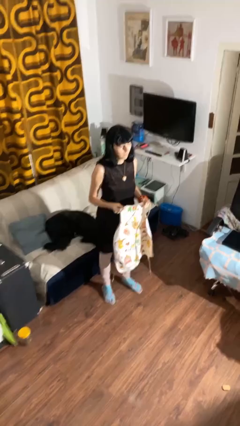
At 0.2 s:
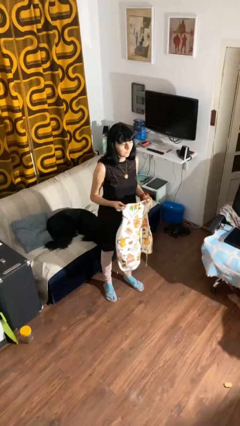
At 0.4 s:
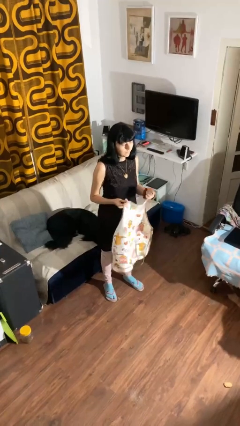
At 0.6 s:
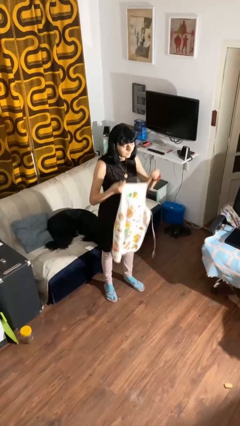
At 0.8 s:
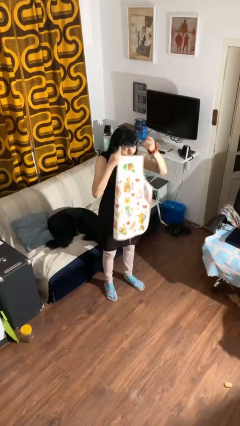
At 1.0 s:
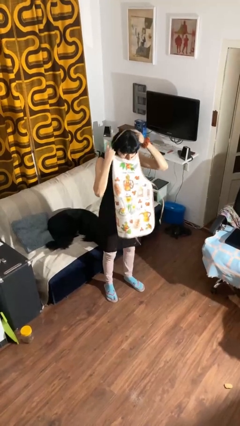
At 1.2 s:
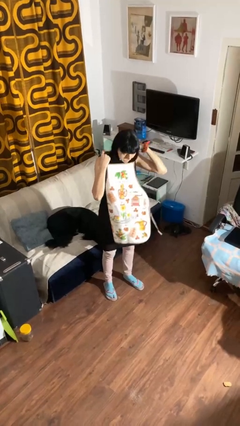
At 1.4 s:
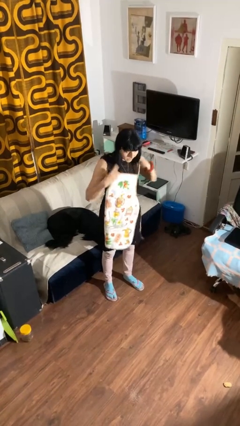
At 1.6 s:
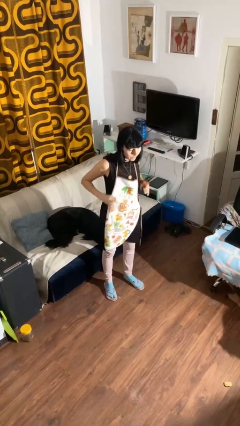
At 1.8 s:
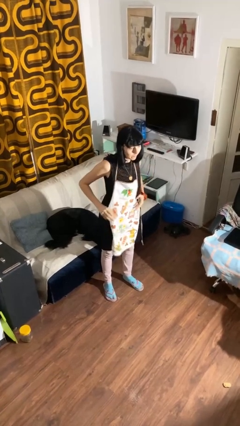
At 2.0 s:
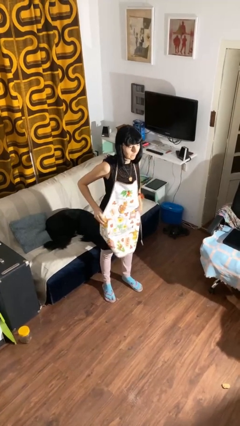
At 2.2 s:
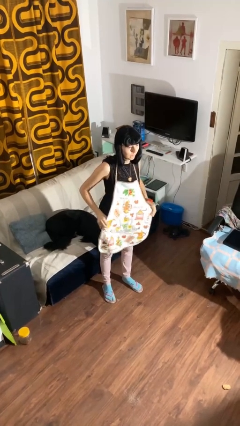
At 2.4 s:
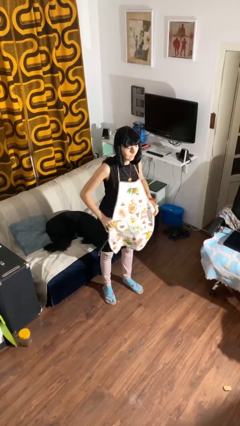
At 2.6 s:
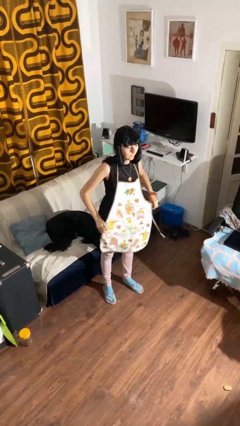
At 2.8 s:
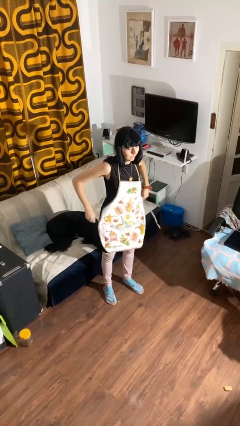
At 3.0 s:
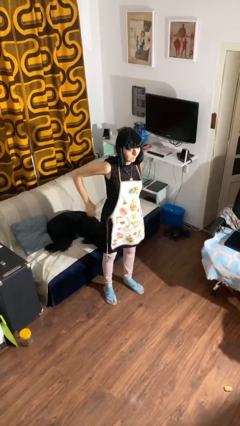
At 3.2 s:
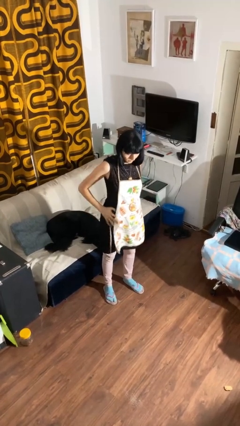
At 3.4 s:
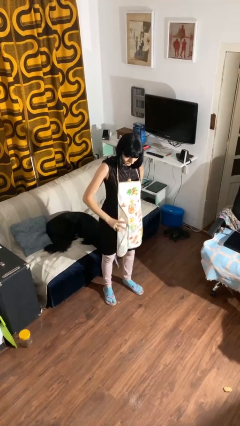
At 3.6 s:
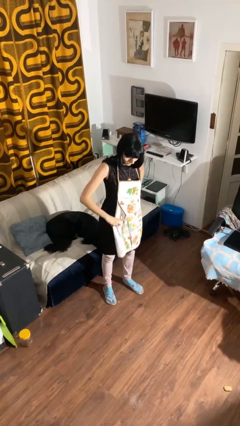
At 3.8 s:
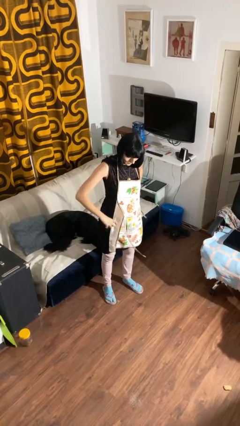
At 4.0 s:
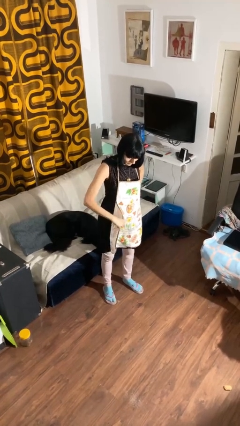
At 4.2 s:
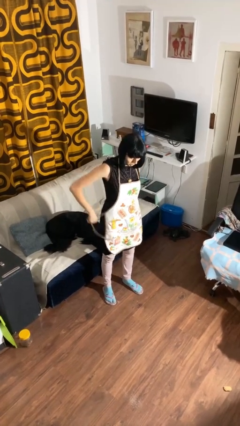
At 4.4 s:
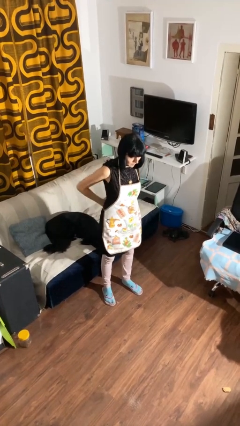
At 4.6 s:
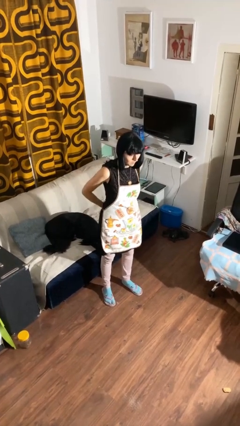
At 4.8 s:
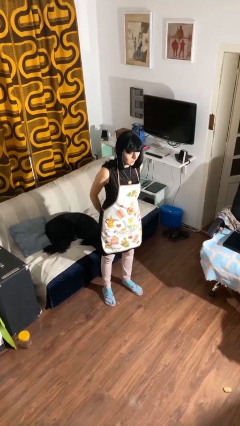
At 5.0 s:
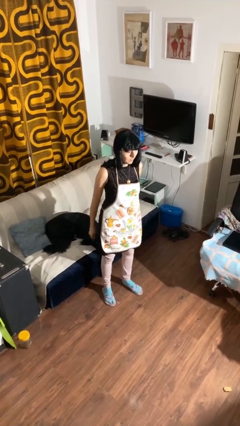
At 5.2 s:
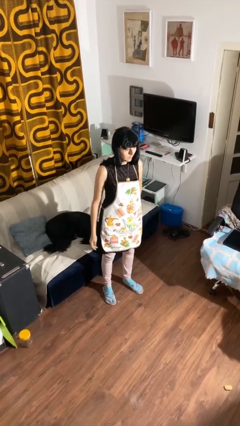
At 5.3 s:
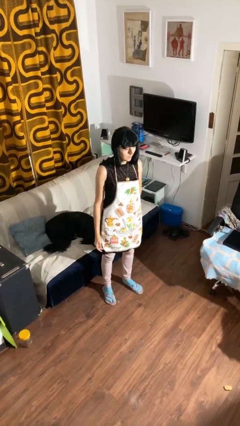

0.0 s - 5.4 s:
person puts on apron

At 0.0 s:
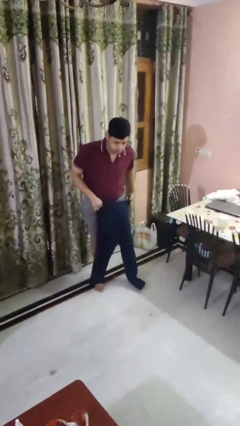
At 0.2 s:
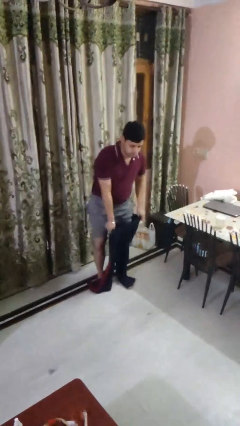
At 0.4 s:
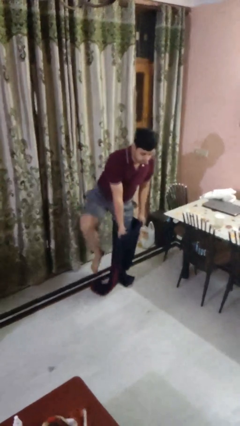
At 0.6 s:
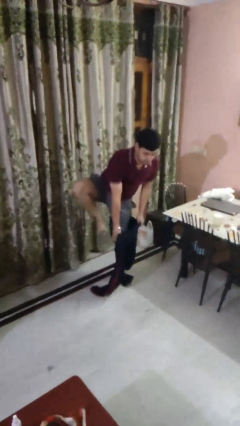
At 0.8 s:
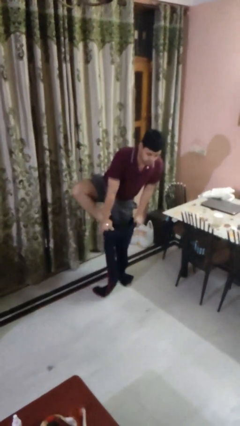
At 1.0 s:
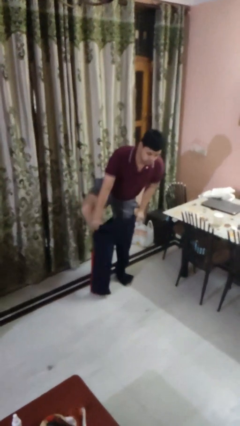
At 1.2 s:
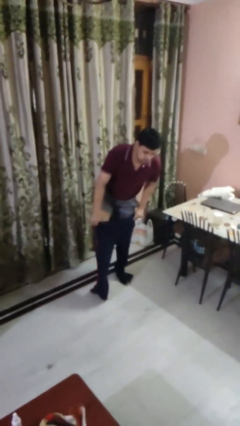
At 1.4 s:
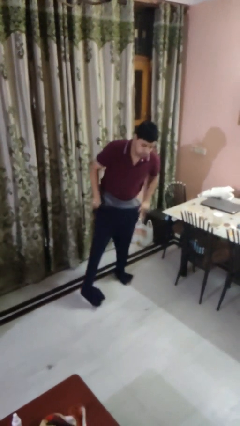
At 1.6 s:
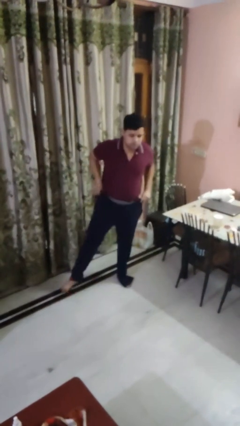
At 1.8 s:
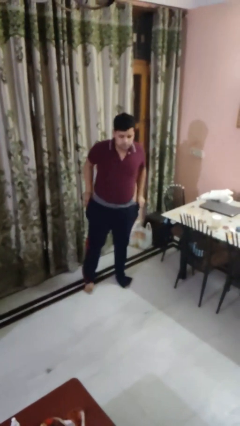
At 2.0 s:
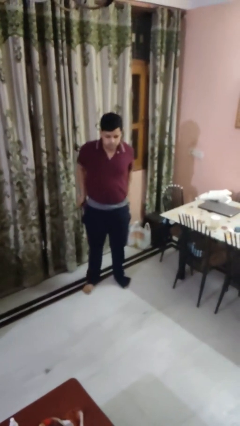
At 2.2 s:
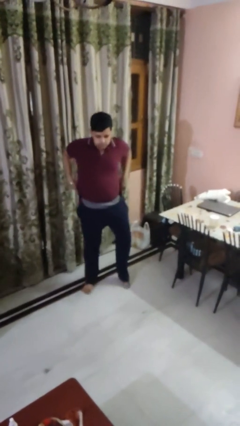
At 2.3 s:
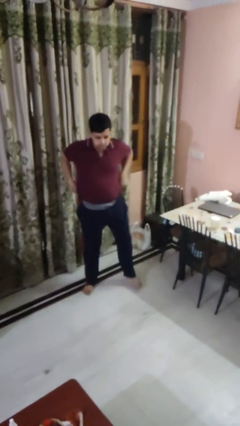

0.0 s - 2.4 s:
person puts on pants

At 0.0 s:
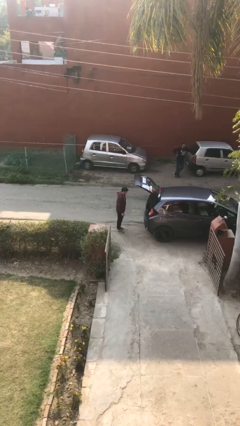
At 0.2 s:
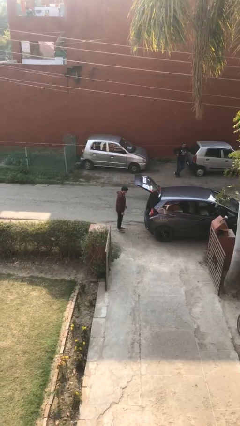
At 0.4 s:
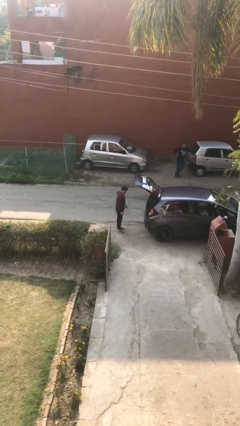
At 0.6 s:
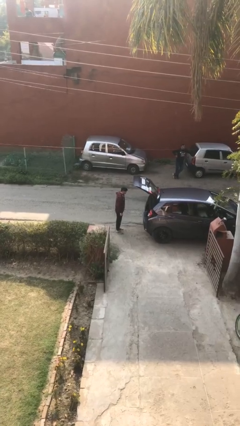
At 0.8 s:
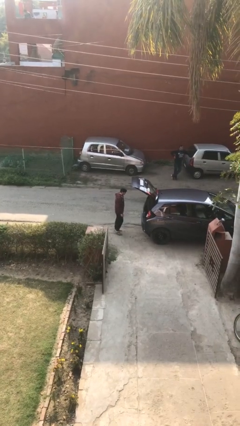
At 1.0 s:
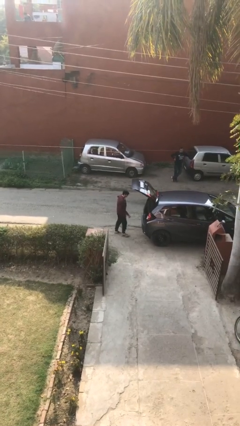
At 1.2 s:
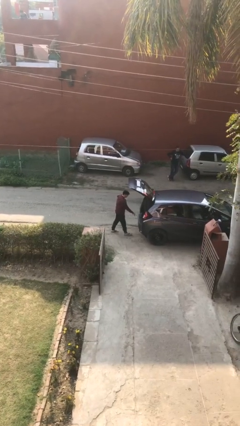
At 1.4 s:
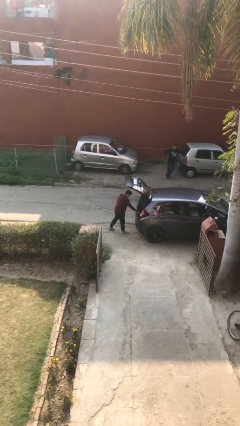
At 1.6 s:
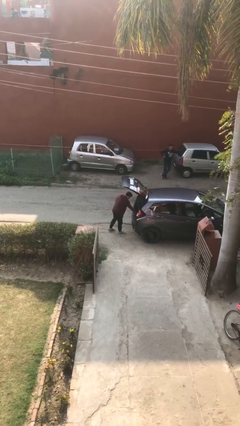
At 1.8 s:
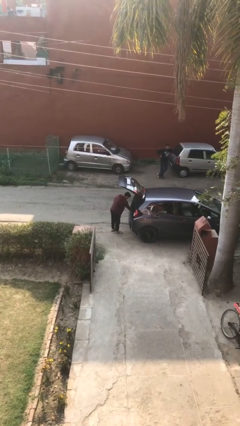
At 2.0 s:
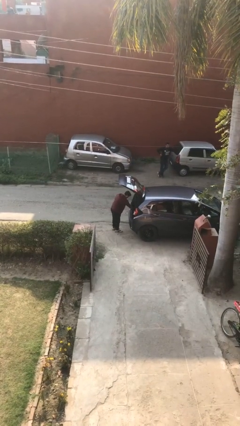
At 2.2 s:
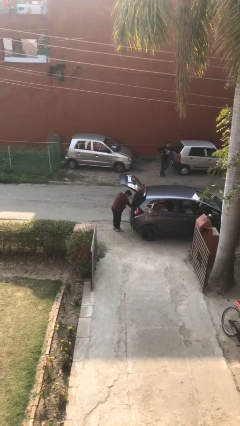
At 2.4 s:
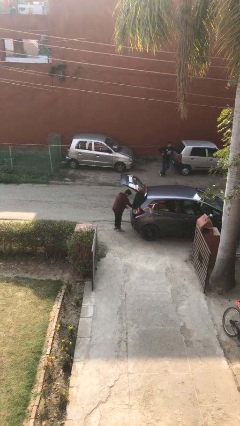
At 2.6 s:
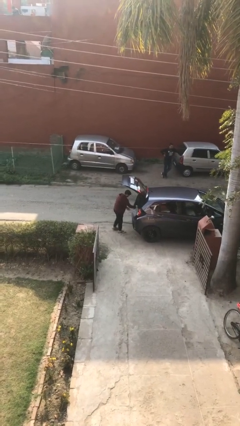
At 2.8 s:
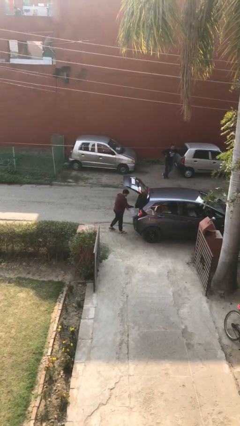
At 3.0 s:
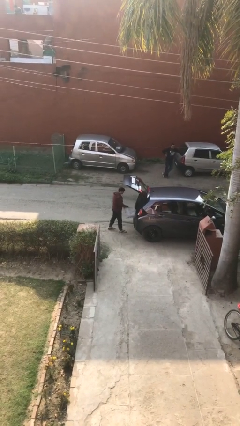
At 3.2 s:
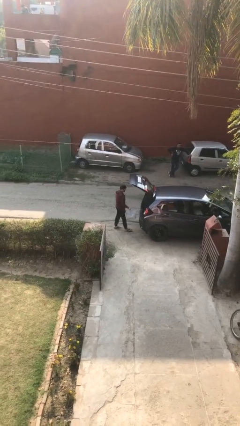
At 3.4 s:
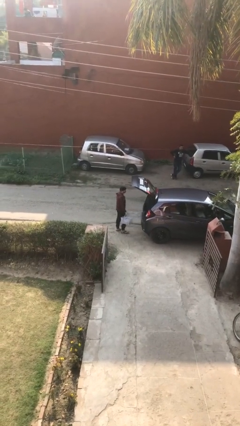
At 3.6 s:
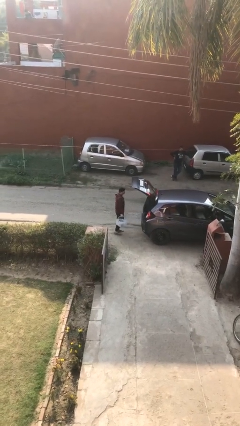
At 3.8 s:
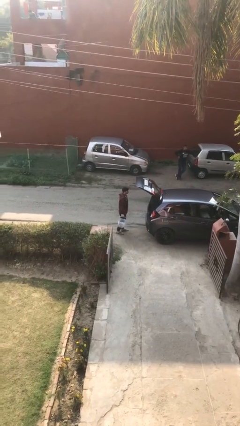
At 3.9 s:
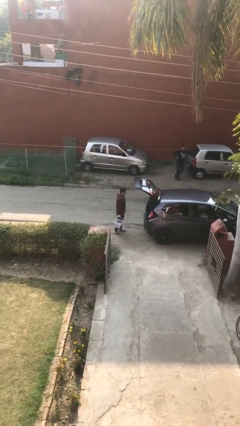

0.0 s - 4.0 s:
person unloads car

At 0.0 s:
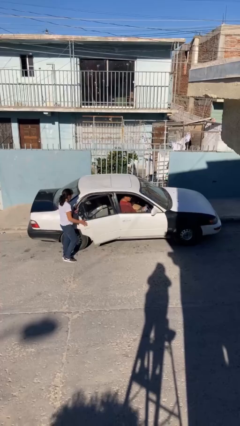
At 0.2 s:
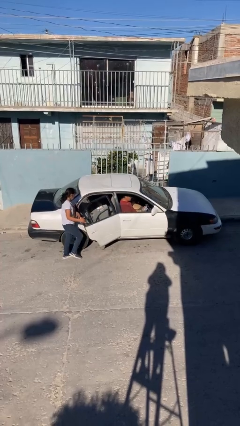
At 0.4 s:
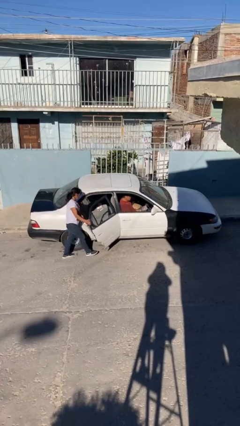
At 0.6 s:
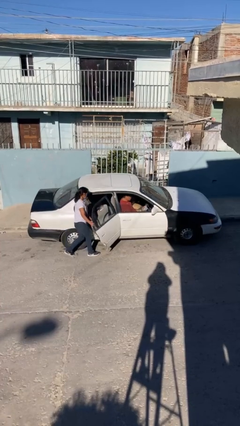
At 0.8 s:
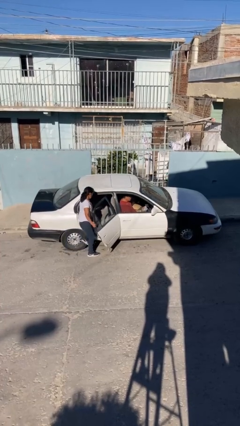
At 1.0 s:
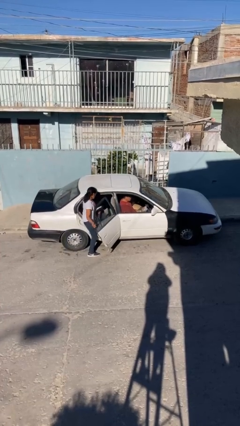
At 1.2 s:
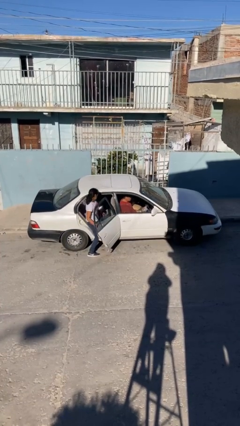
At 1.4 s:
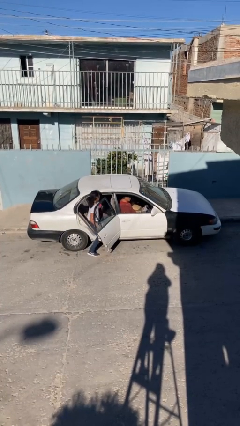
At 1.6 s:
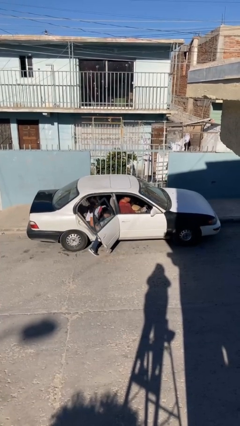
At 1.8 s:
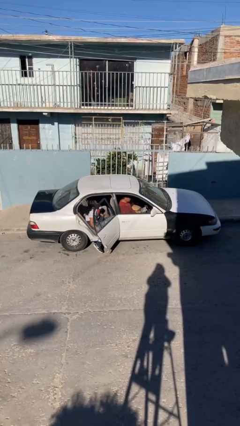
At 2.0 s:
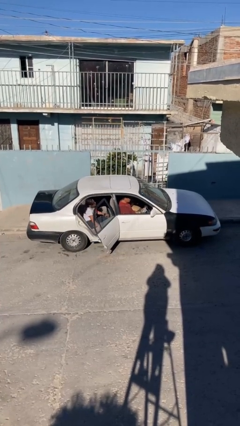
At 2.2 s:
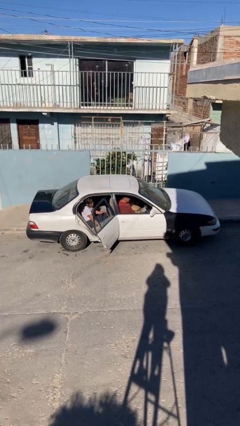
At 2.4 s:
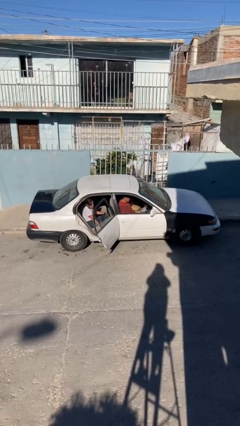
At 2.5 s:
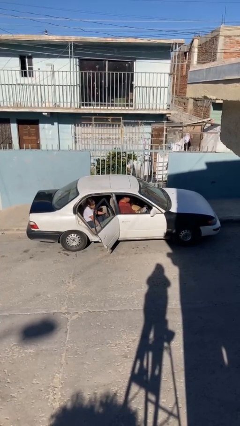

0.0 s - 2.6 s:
car picks up person

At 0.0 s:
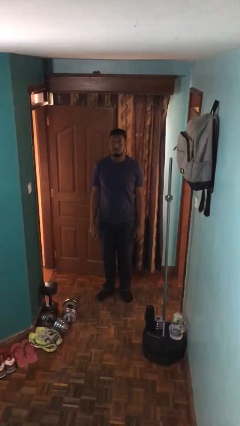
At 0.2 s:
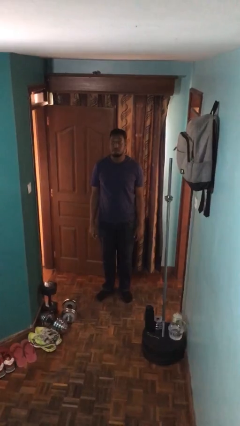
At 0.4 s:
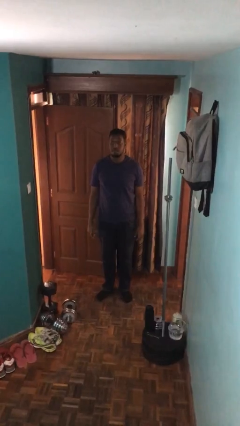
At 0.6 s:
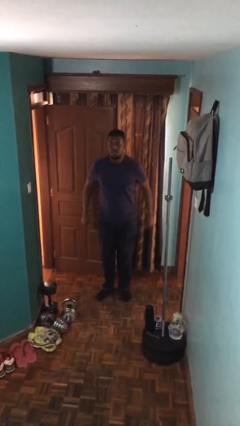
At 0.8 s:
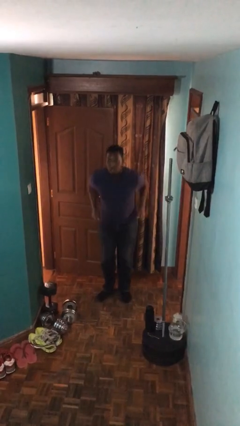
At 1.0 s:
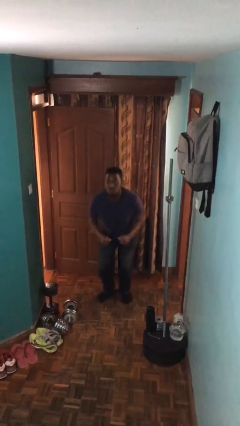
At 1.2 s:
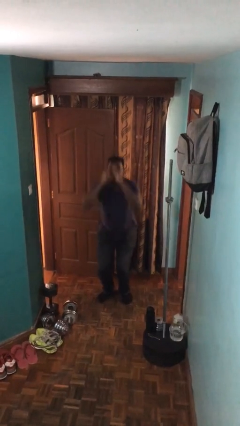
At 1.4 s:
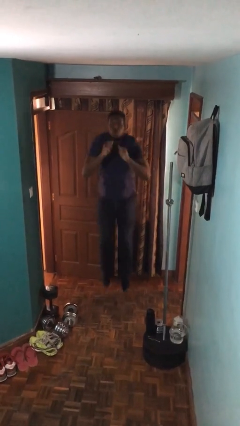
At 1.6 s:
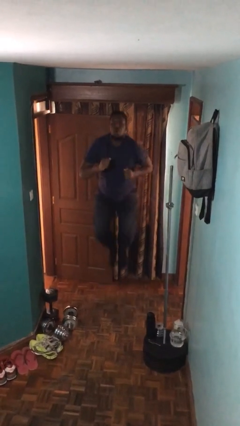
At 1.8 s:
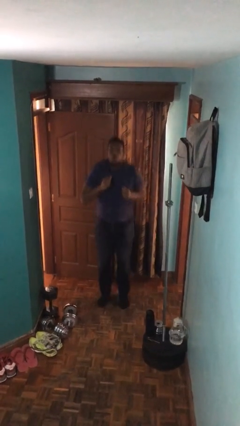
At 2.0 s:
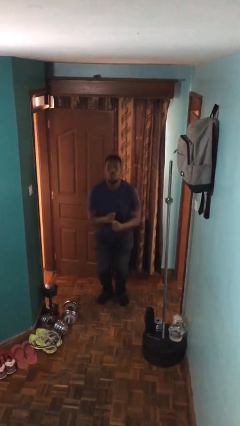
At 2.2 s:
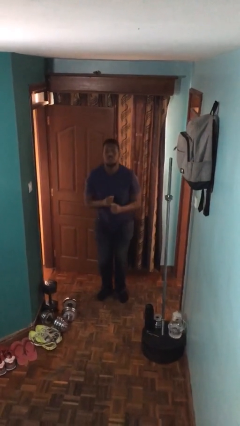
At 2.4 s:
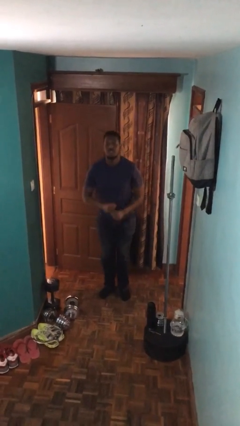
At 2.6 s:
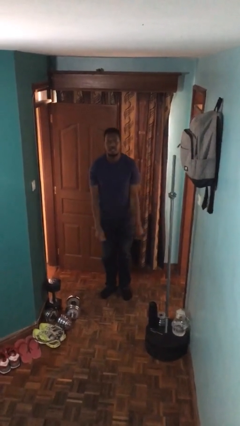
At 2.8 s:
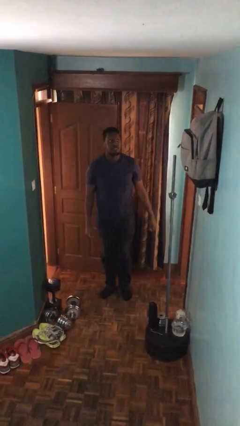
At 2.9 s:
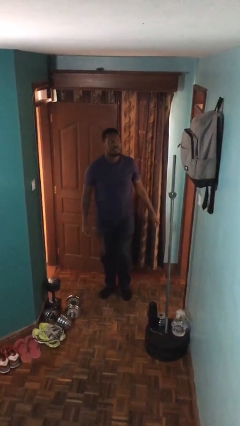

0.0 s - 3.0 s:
person jumps

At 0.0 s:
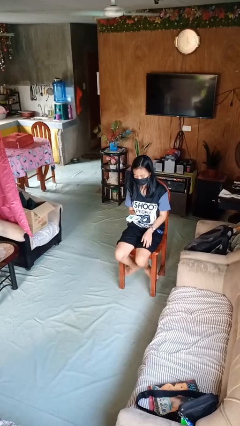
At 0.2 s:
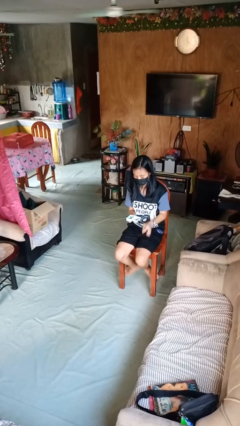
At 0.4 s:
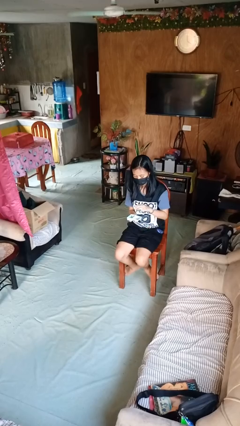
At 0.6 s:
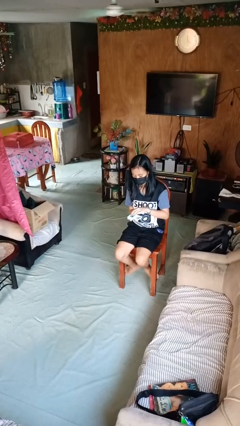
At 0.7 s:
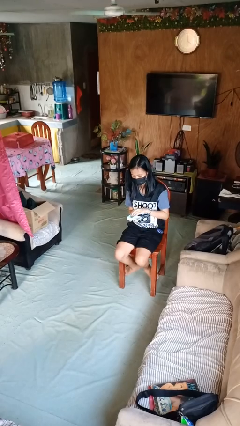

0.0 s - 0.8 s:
person searches jewelry box
